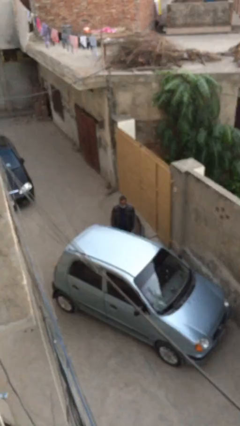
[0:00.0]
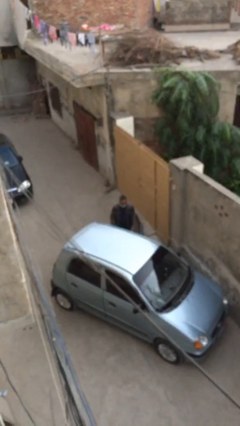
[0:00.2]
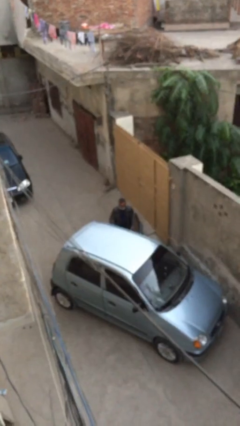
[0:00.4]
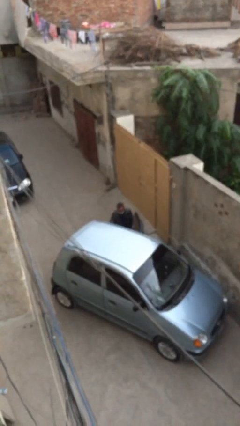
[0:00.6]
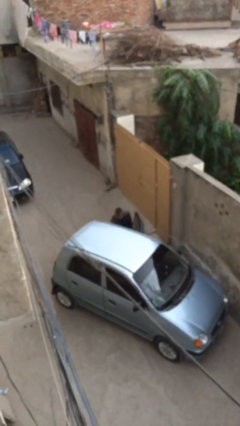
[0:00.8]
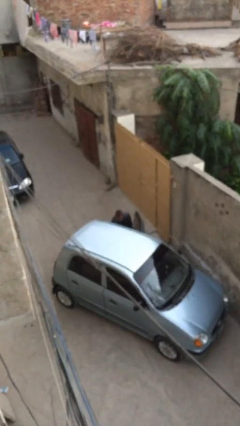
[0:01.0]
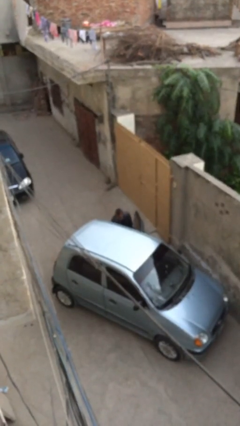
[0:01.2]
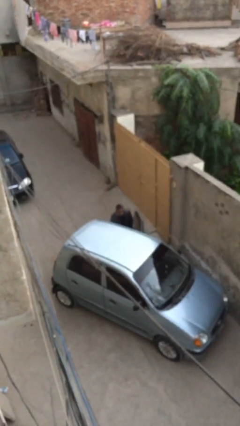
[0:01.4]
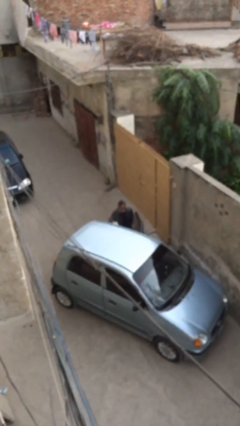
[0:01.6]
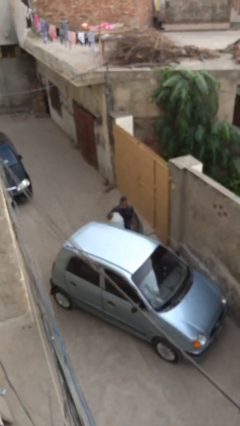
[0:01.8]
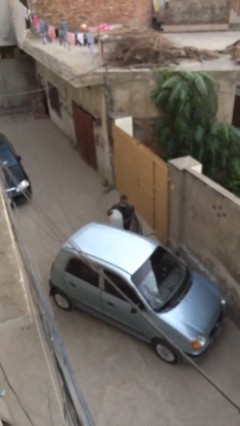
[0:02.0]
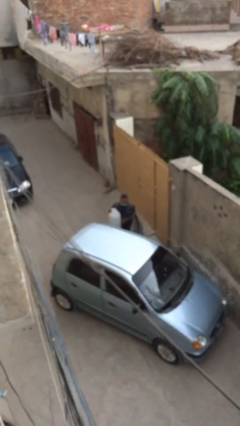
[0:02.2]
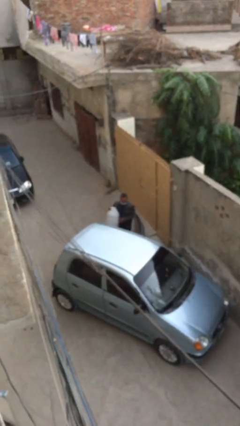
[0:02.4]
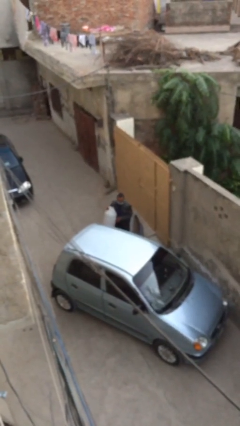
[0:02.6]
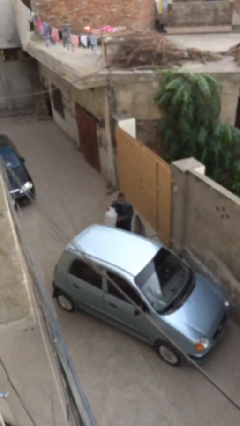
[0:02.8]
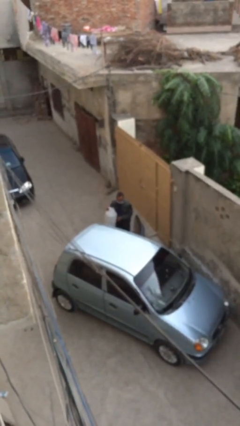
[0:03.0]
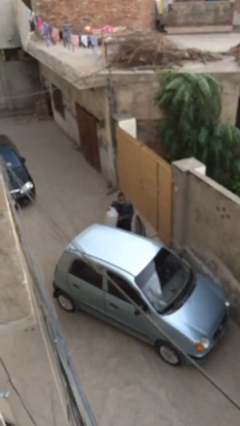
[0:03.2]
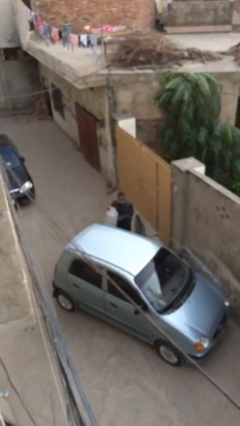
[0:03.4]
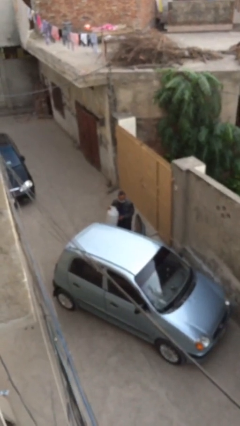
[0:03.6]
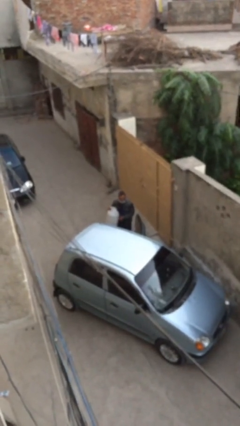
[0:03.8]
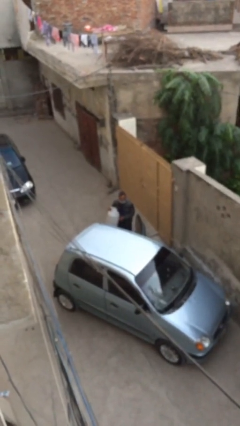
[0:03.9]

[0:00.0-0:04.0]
person unloads car

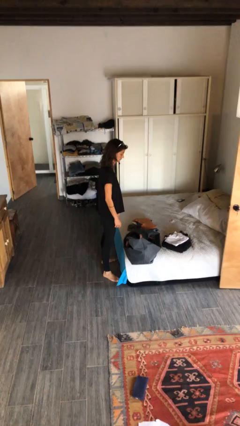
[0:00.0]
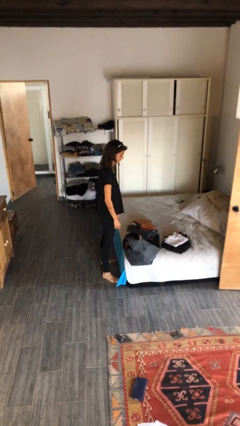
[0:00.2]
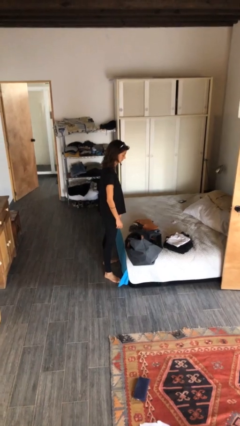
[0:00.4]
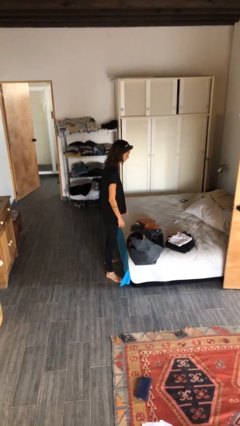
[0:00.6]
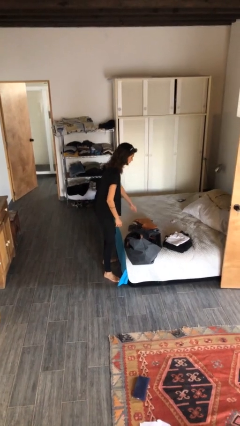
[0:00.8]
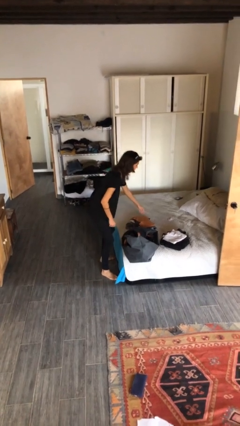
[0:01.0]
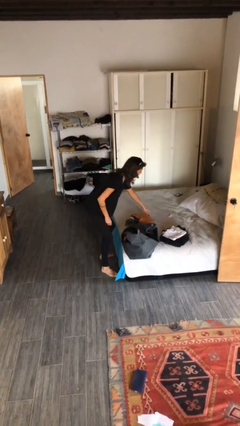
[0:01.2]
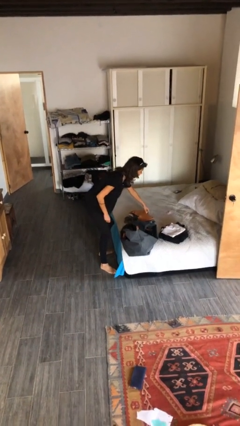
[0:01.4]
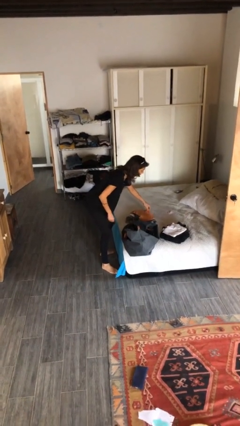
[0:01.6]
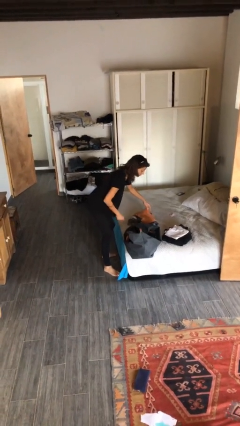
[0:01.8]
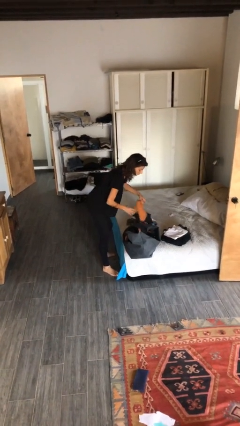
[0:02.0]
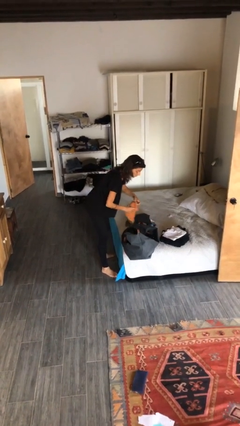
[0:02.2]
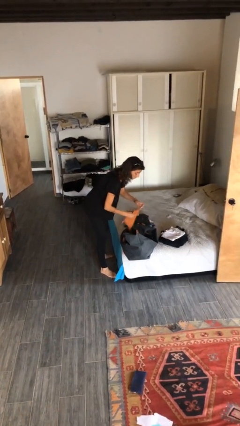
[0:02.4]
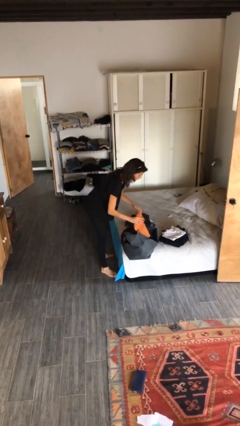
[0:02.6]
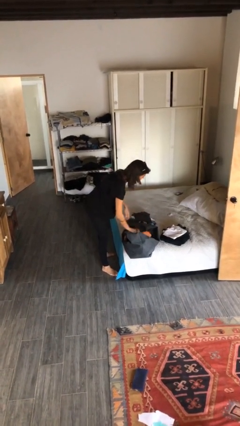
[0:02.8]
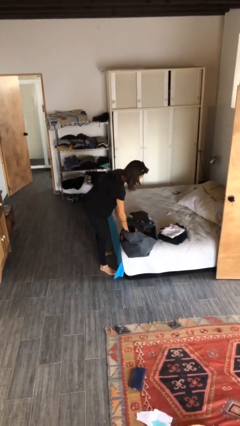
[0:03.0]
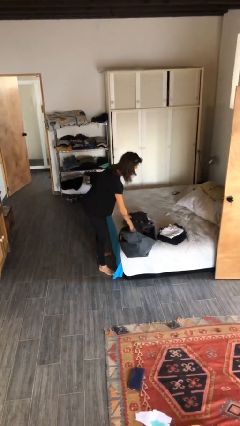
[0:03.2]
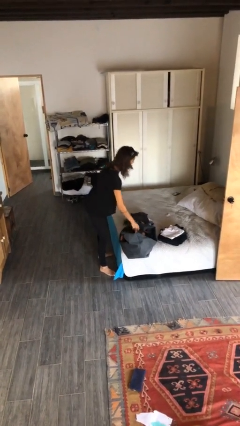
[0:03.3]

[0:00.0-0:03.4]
person loads clothes into suitcase

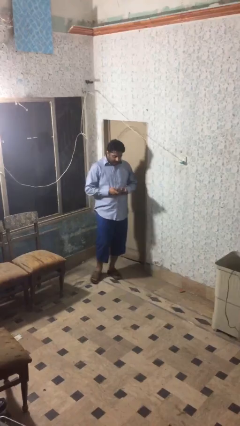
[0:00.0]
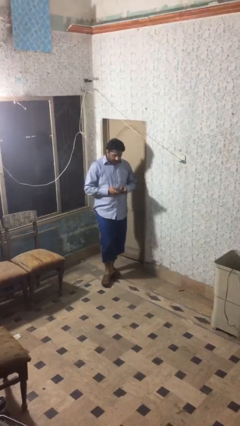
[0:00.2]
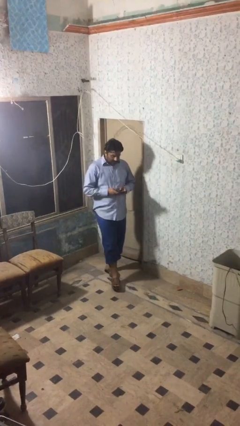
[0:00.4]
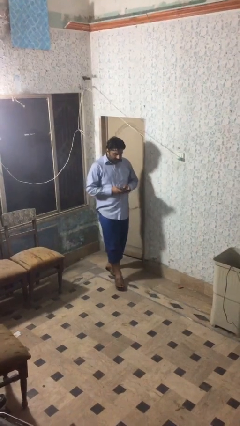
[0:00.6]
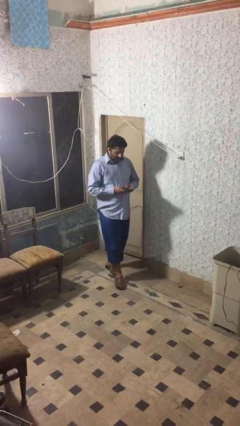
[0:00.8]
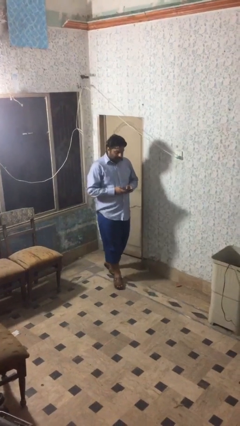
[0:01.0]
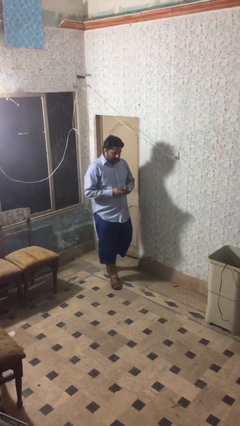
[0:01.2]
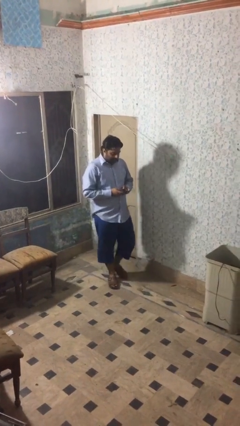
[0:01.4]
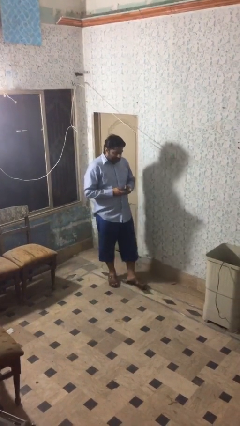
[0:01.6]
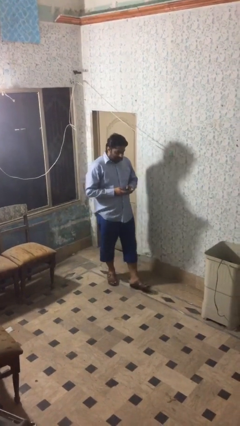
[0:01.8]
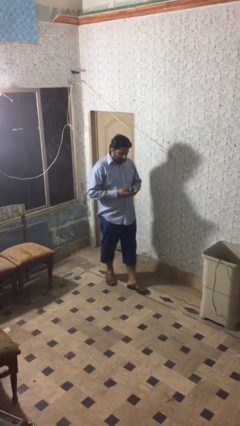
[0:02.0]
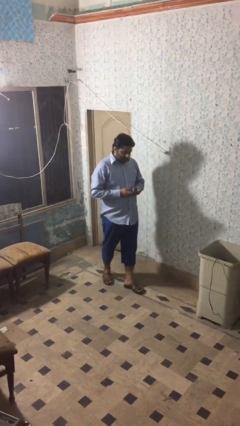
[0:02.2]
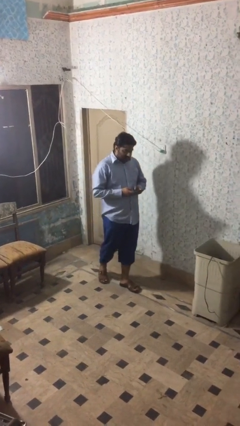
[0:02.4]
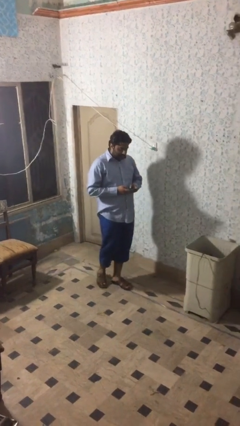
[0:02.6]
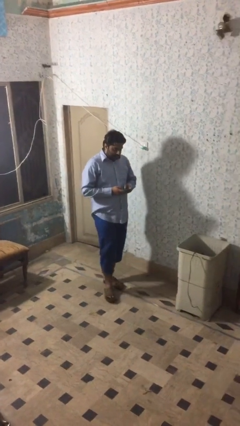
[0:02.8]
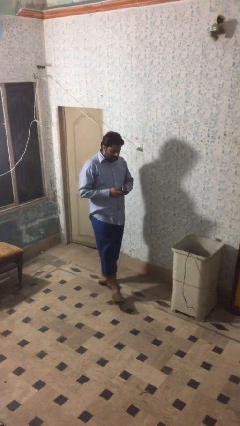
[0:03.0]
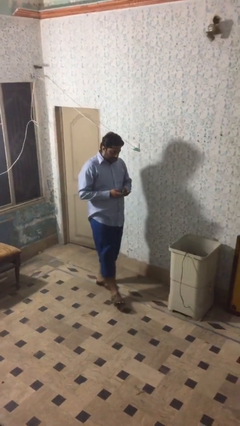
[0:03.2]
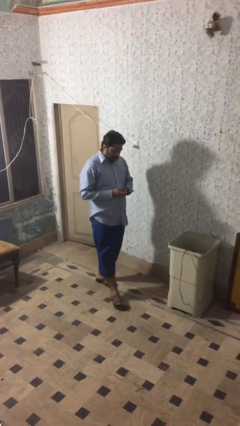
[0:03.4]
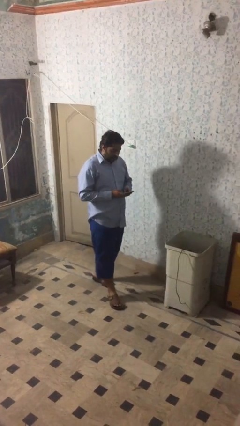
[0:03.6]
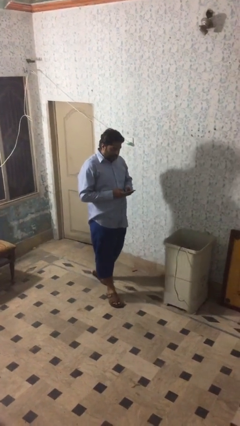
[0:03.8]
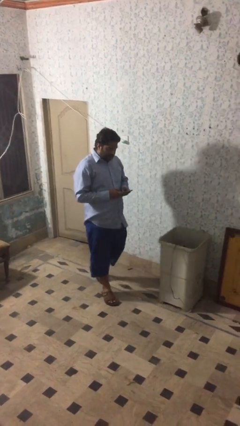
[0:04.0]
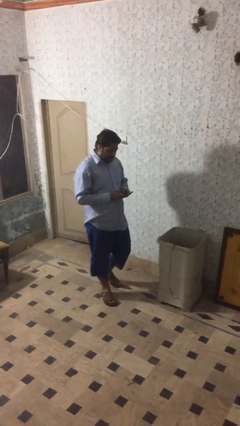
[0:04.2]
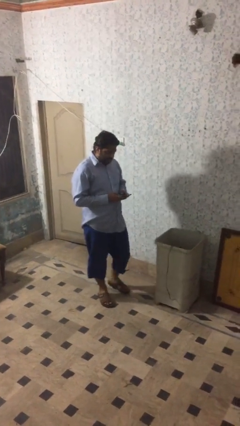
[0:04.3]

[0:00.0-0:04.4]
person texts on phone

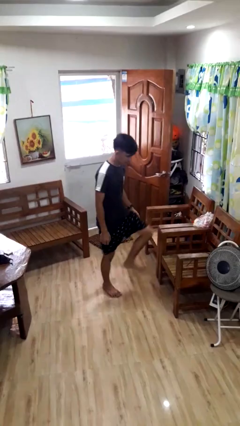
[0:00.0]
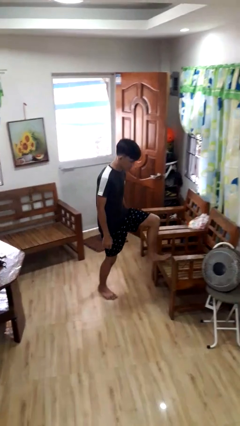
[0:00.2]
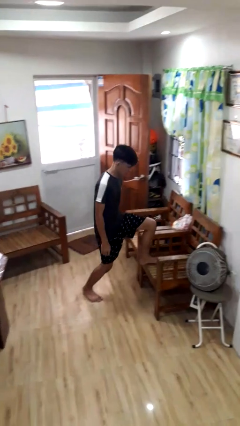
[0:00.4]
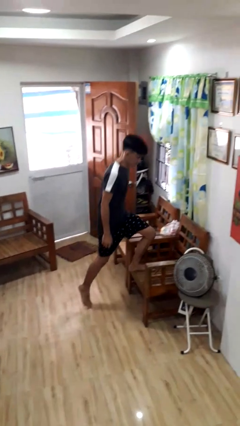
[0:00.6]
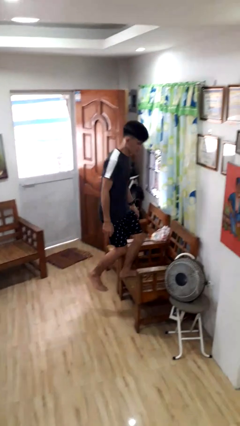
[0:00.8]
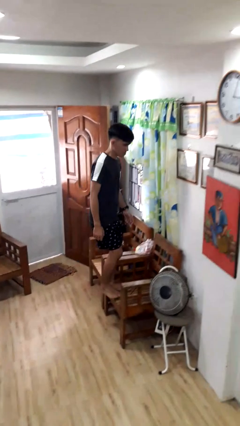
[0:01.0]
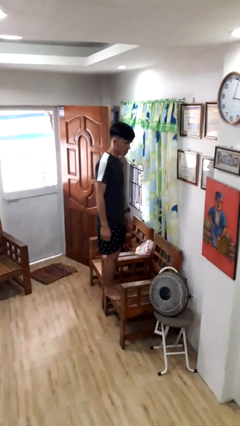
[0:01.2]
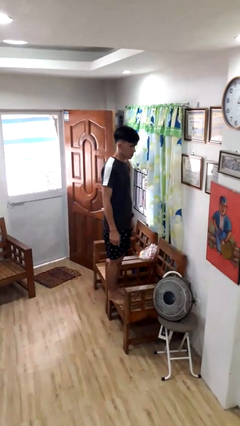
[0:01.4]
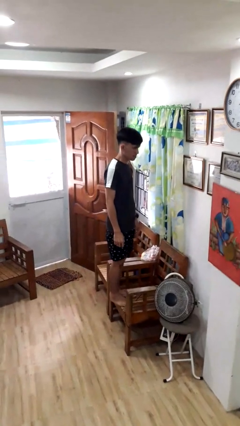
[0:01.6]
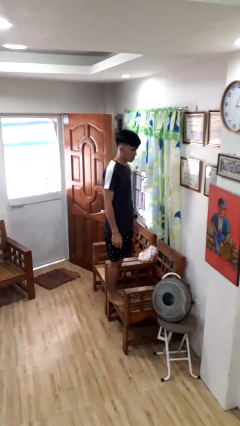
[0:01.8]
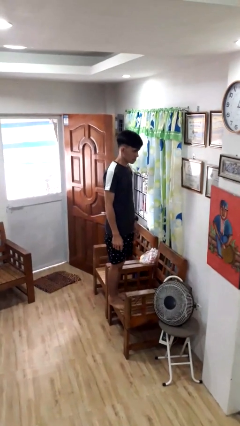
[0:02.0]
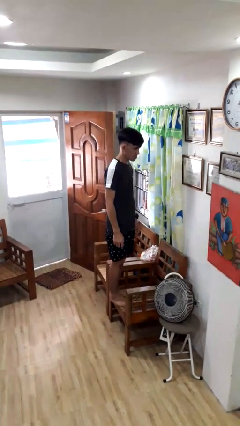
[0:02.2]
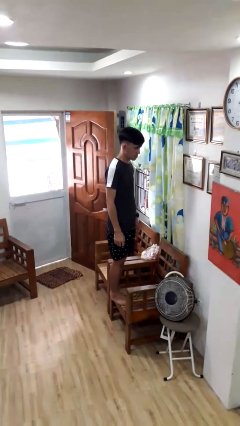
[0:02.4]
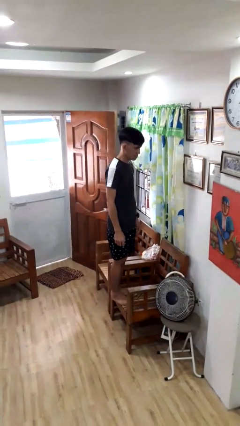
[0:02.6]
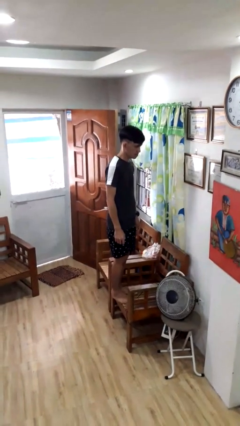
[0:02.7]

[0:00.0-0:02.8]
person climbs on chair

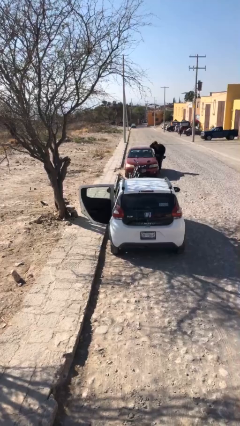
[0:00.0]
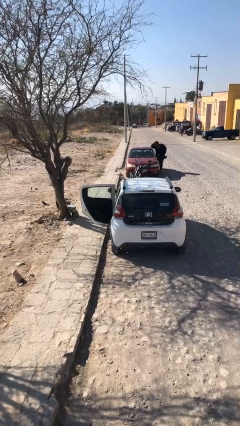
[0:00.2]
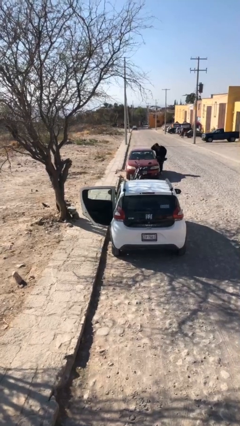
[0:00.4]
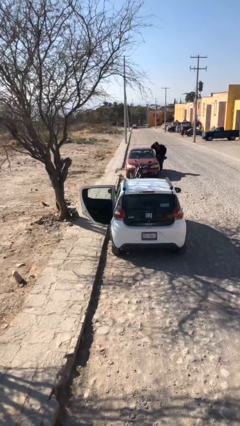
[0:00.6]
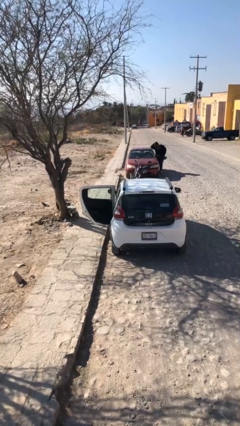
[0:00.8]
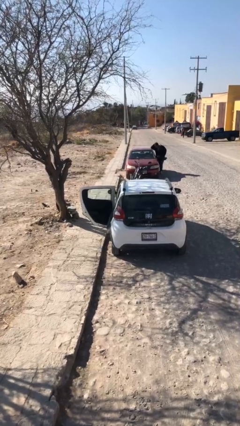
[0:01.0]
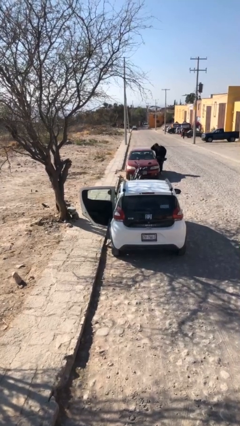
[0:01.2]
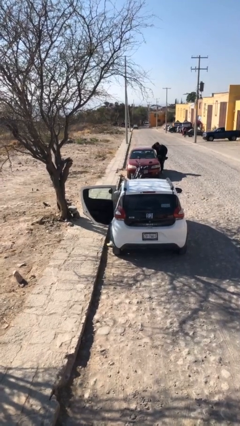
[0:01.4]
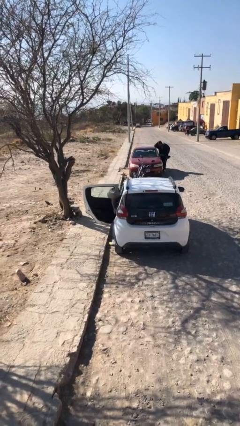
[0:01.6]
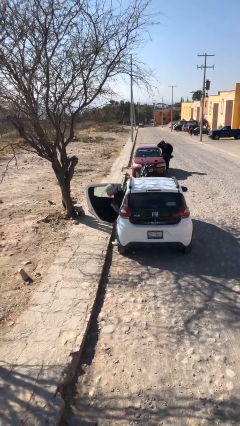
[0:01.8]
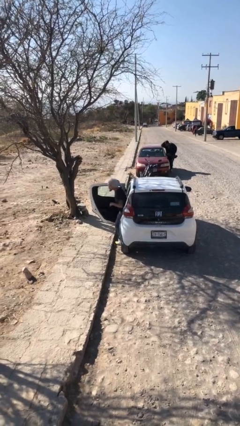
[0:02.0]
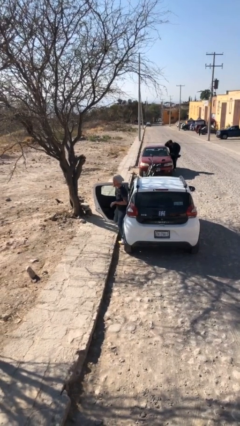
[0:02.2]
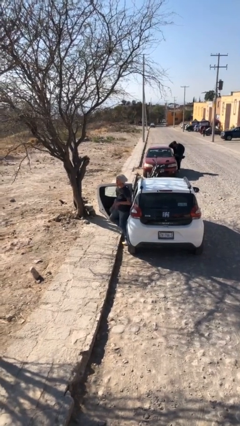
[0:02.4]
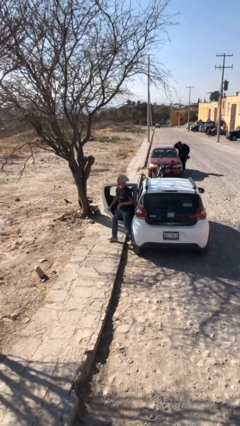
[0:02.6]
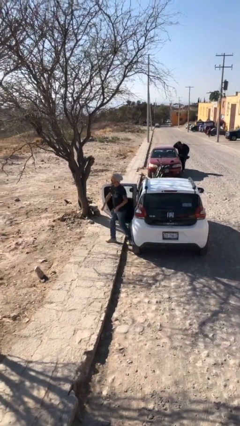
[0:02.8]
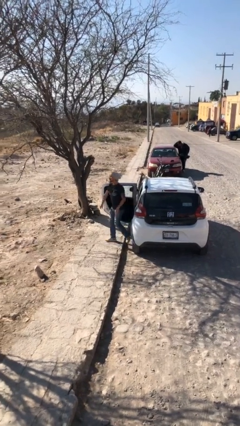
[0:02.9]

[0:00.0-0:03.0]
person exits car

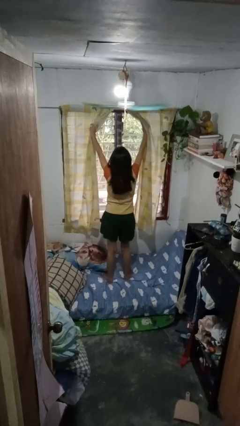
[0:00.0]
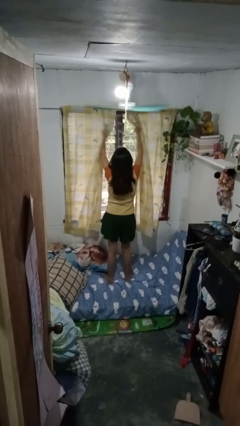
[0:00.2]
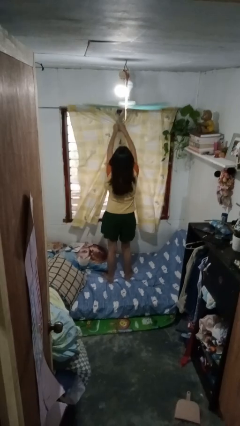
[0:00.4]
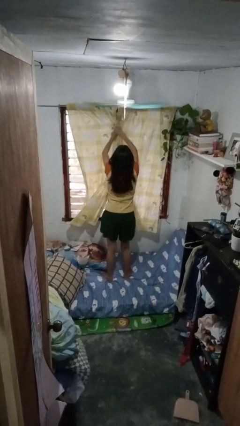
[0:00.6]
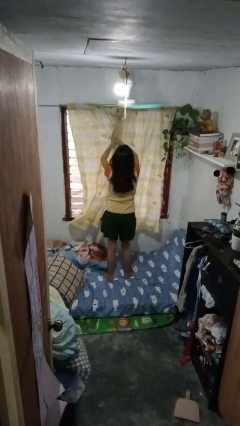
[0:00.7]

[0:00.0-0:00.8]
person closes curtains
